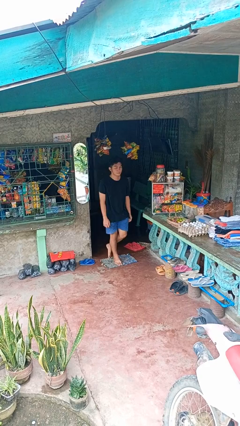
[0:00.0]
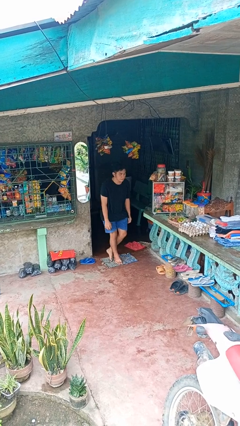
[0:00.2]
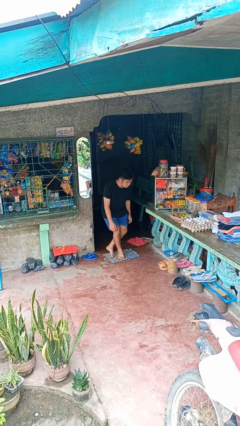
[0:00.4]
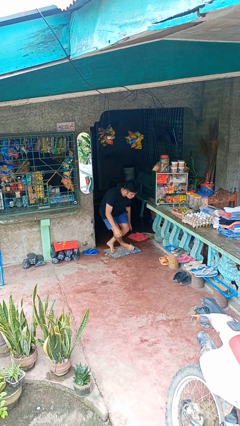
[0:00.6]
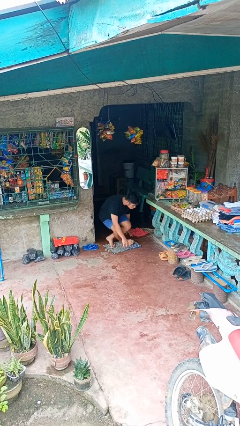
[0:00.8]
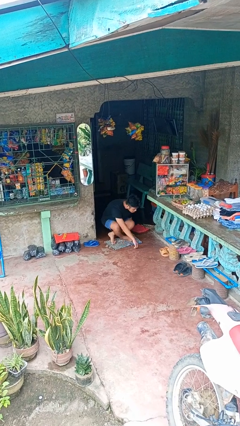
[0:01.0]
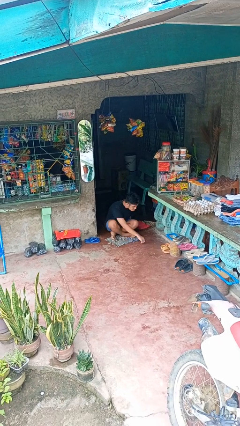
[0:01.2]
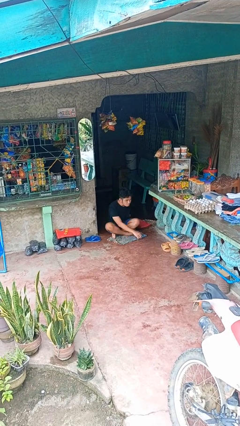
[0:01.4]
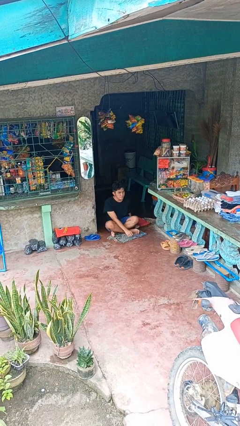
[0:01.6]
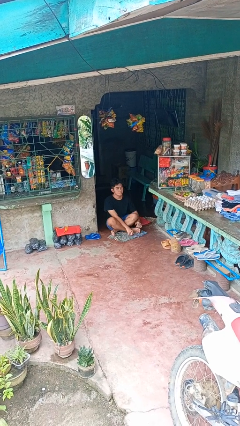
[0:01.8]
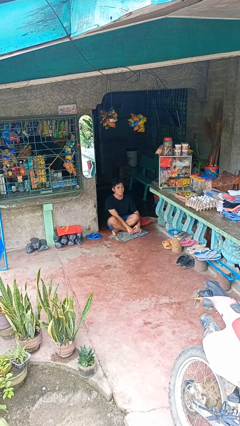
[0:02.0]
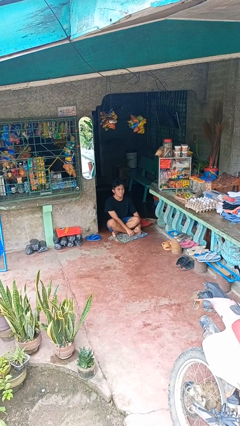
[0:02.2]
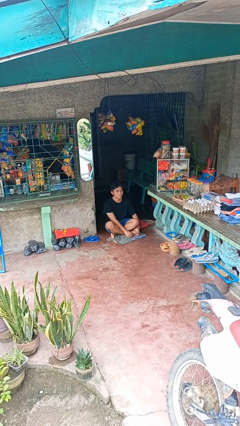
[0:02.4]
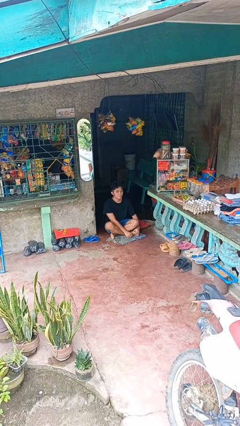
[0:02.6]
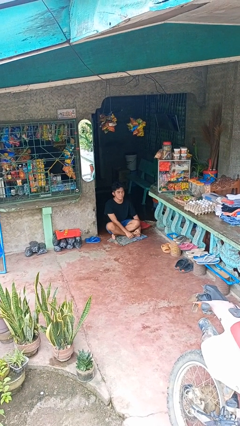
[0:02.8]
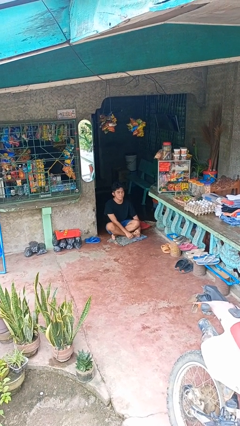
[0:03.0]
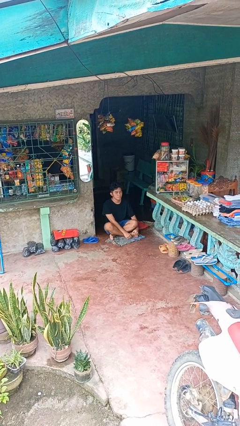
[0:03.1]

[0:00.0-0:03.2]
person sits crisscross

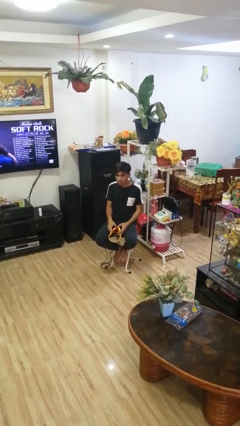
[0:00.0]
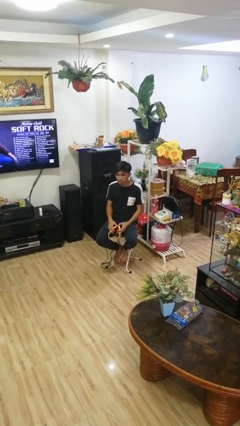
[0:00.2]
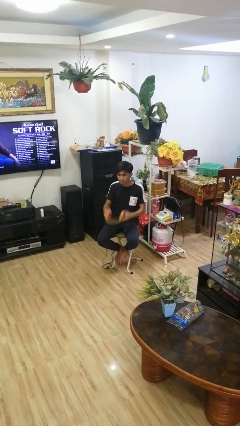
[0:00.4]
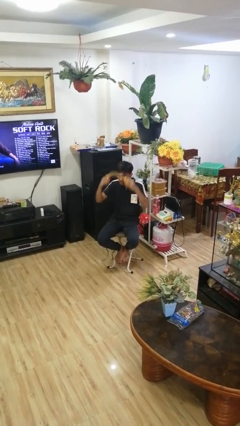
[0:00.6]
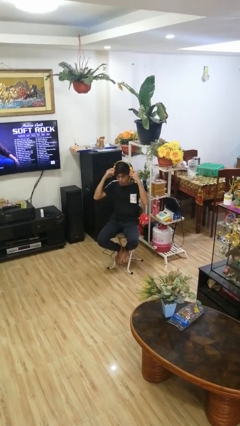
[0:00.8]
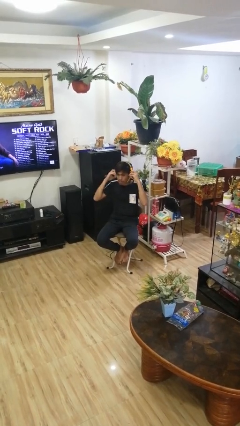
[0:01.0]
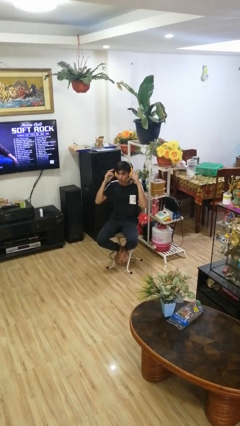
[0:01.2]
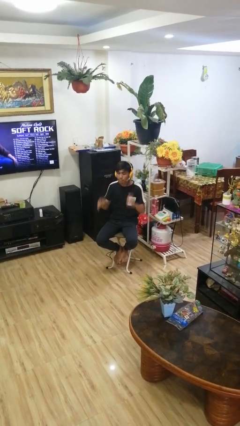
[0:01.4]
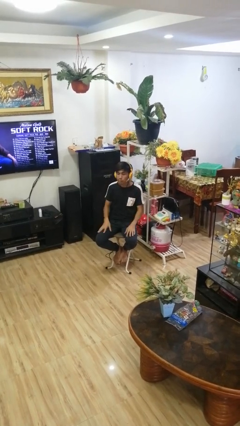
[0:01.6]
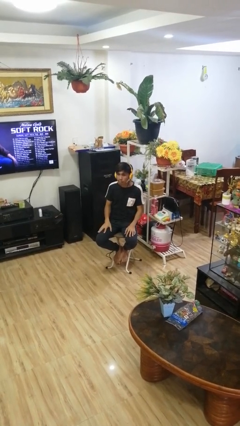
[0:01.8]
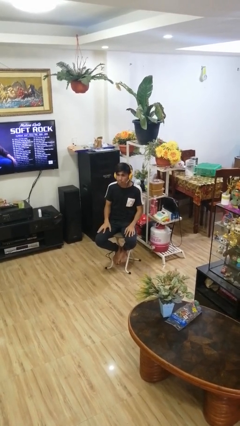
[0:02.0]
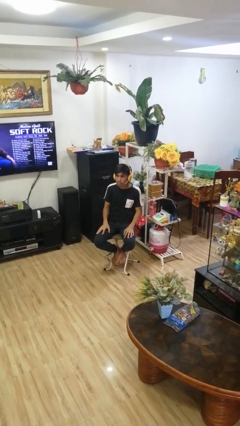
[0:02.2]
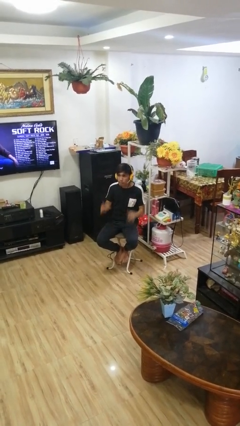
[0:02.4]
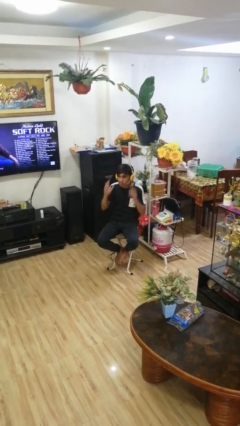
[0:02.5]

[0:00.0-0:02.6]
person puts on headphones

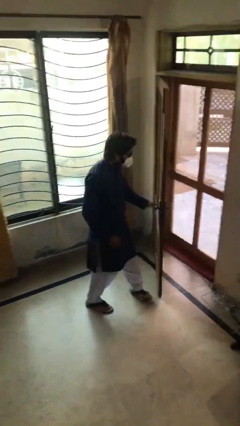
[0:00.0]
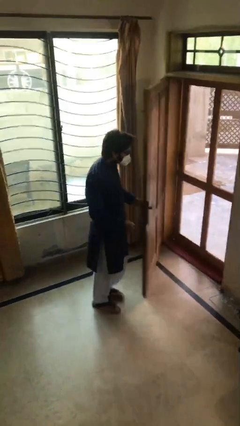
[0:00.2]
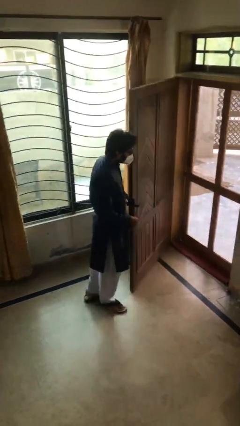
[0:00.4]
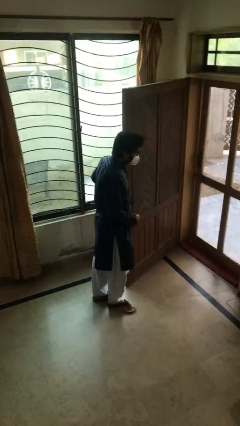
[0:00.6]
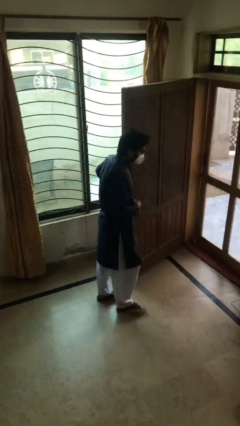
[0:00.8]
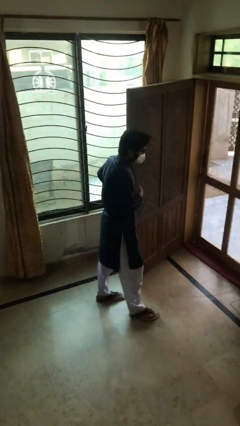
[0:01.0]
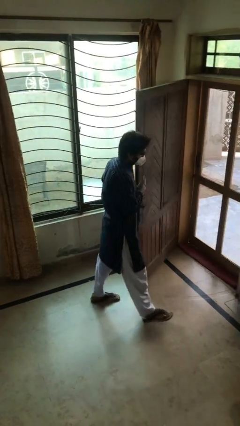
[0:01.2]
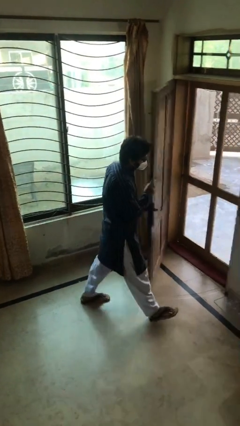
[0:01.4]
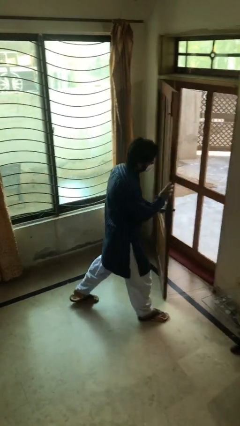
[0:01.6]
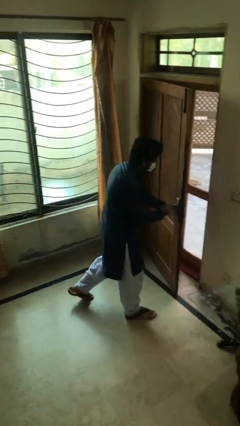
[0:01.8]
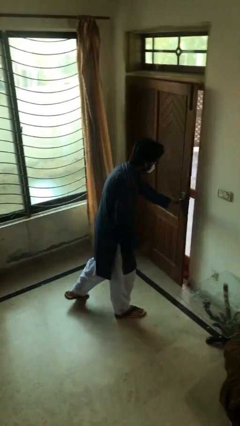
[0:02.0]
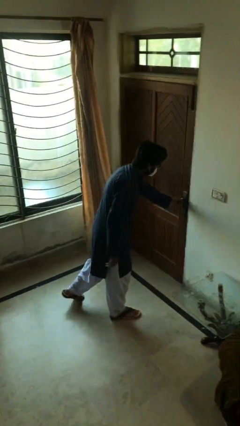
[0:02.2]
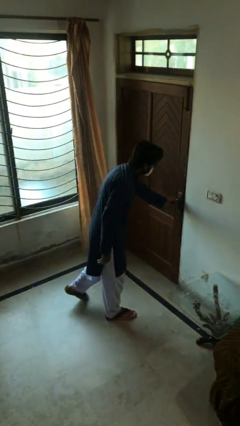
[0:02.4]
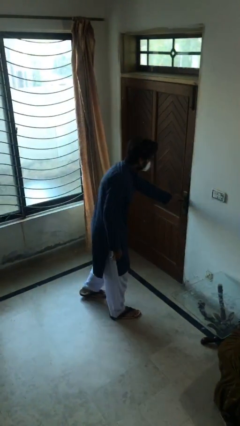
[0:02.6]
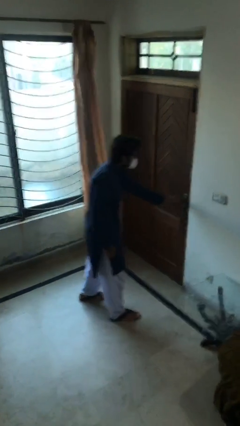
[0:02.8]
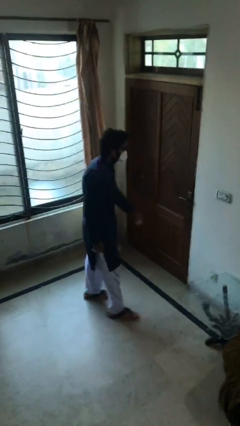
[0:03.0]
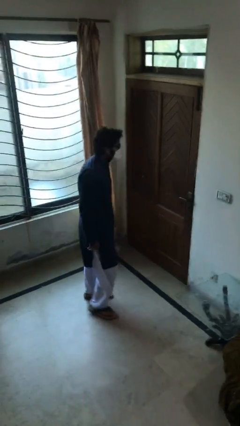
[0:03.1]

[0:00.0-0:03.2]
person closes facility door

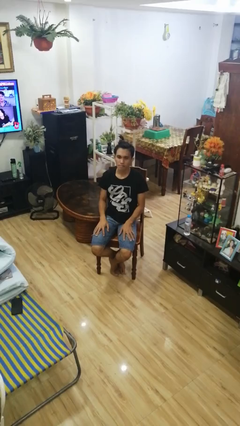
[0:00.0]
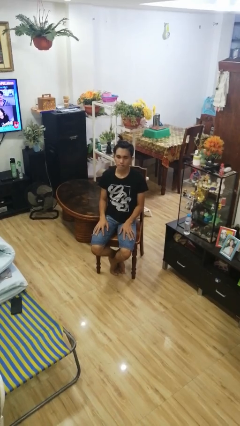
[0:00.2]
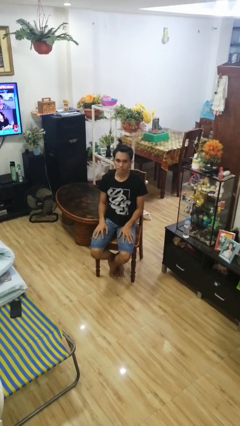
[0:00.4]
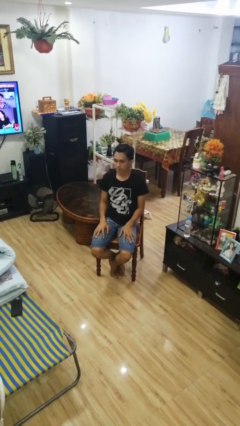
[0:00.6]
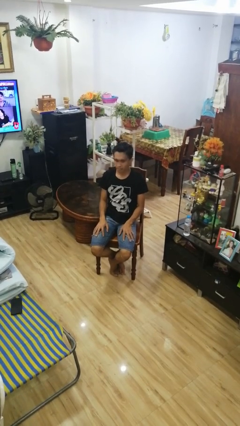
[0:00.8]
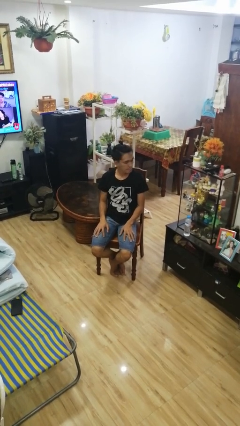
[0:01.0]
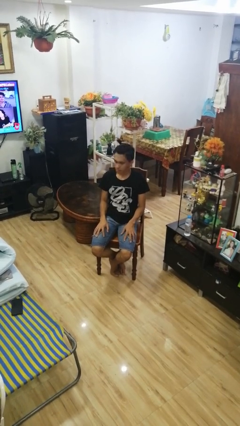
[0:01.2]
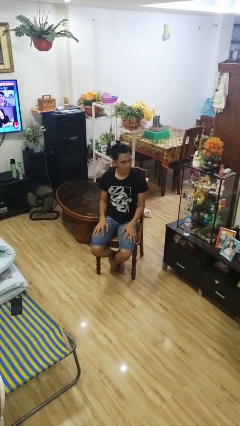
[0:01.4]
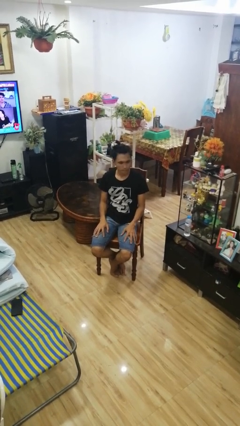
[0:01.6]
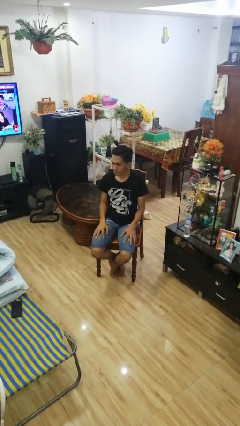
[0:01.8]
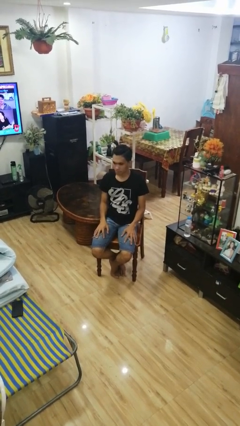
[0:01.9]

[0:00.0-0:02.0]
person shakes head

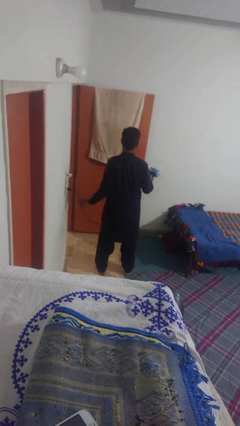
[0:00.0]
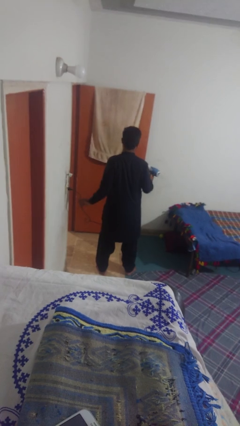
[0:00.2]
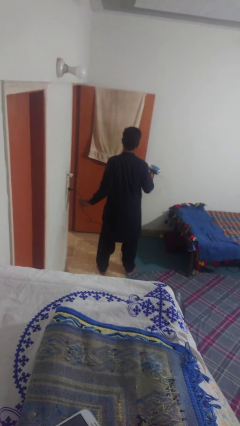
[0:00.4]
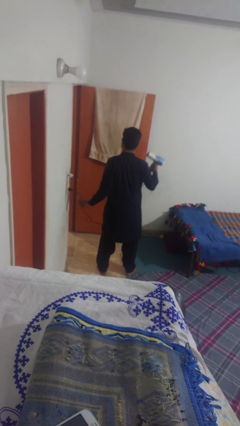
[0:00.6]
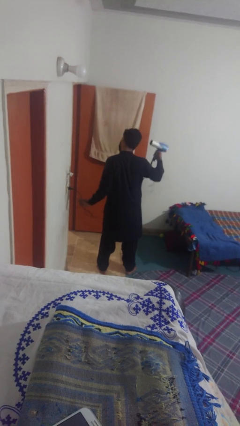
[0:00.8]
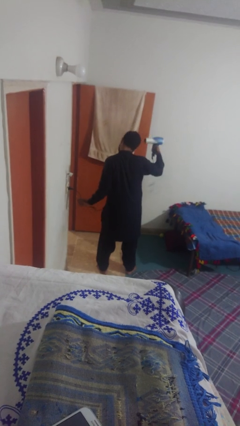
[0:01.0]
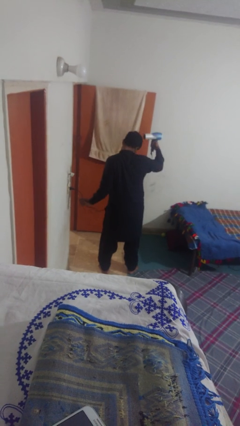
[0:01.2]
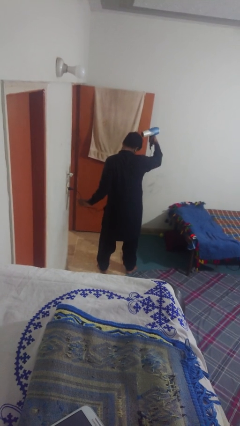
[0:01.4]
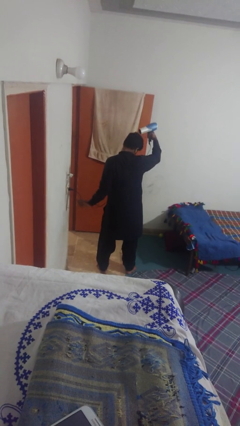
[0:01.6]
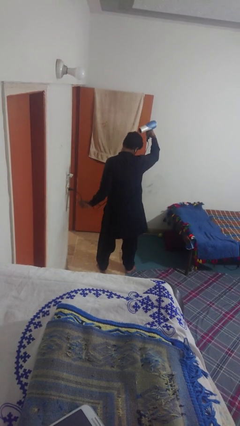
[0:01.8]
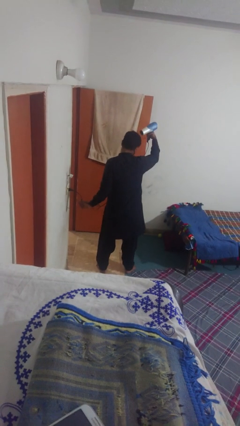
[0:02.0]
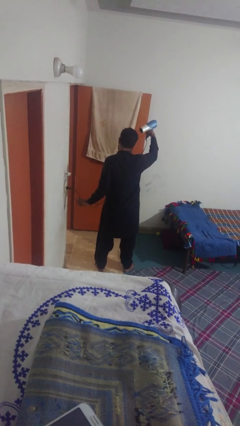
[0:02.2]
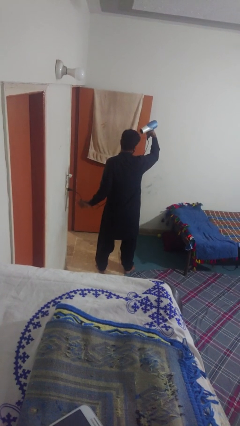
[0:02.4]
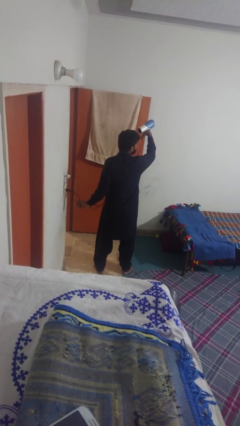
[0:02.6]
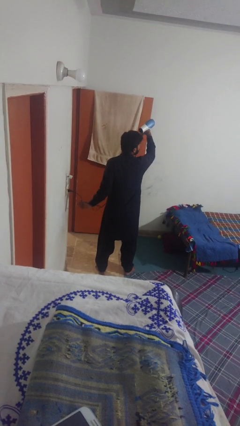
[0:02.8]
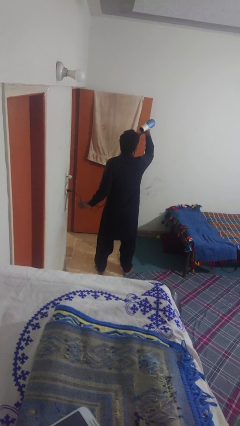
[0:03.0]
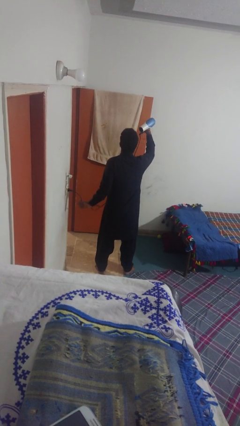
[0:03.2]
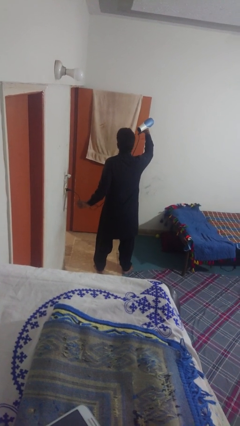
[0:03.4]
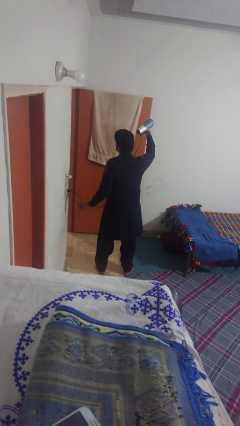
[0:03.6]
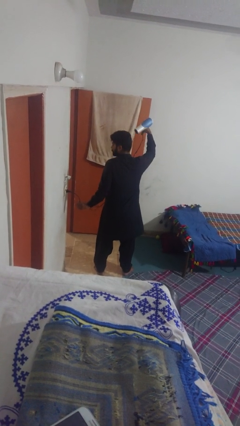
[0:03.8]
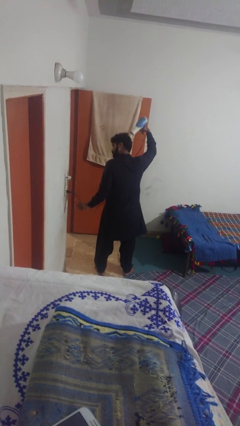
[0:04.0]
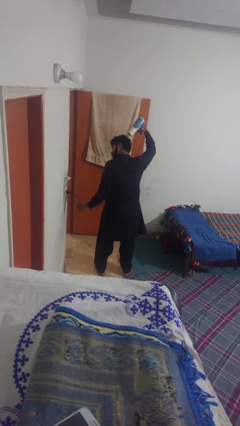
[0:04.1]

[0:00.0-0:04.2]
person dries hair with hairdryer

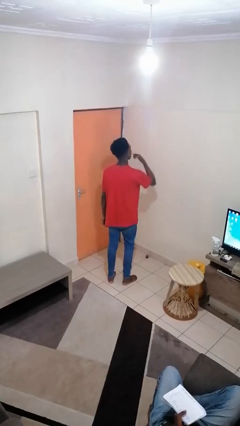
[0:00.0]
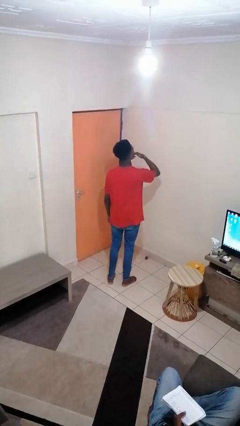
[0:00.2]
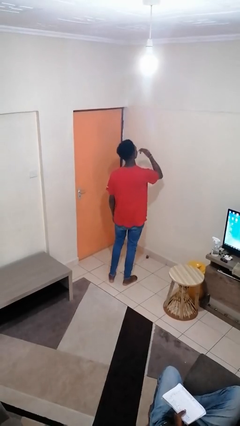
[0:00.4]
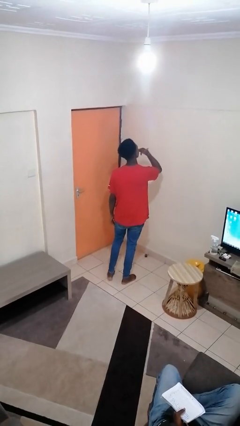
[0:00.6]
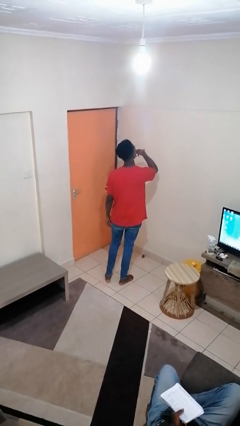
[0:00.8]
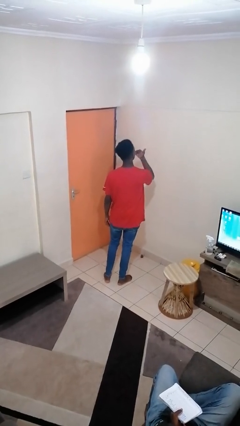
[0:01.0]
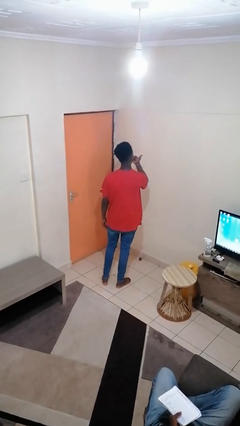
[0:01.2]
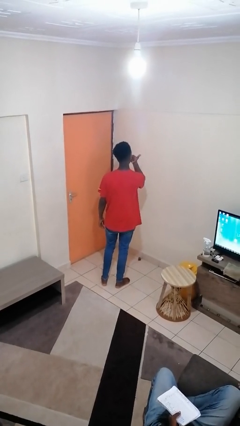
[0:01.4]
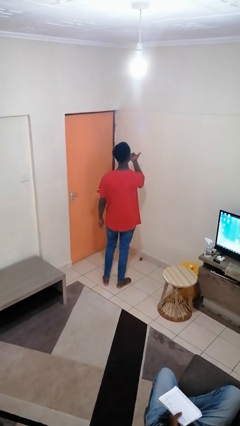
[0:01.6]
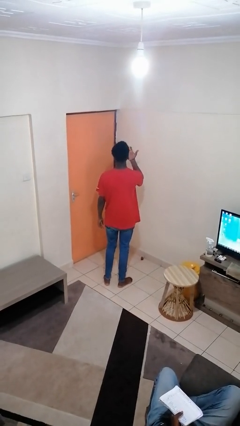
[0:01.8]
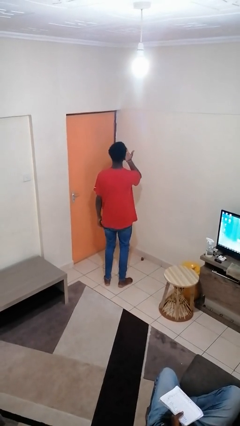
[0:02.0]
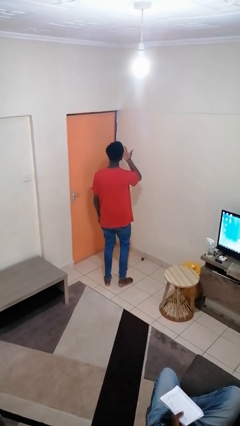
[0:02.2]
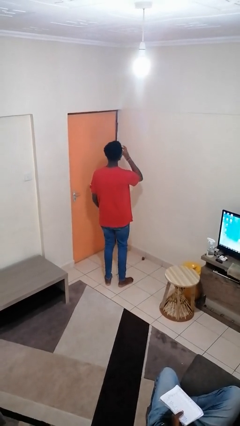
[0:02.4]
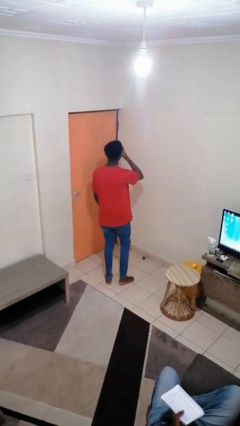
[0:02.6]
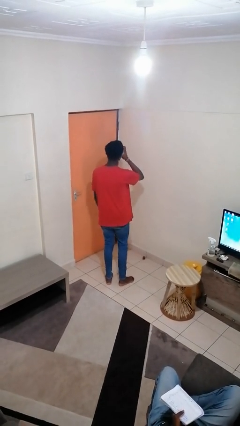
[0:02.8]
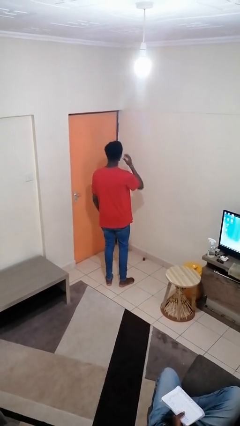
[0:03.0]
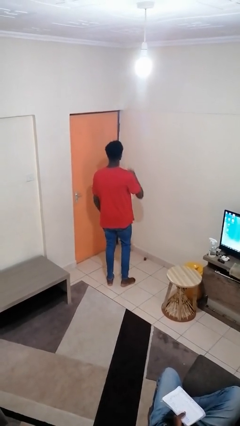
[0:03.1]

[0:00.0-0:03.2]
person licks fingers
